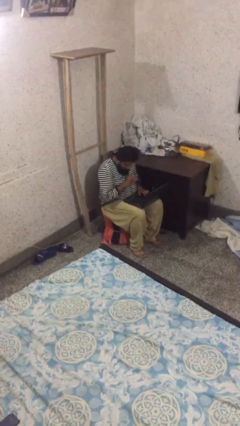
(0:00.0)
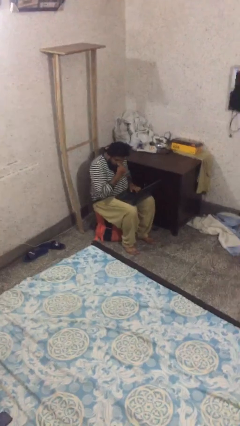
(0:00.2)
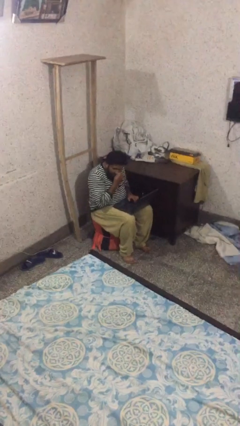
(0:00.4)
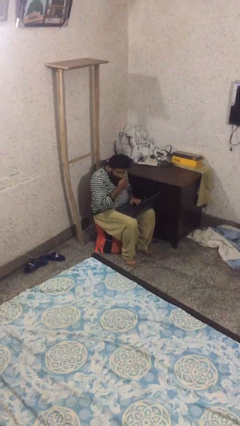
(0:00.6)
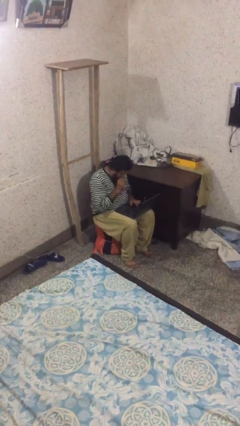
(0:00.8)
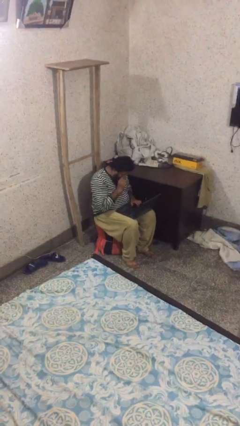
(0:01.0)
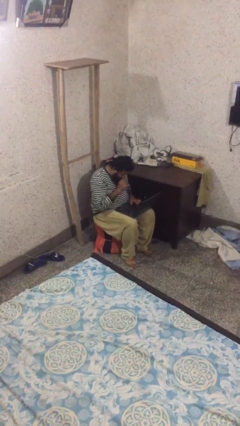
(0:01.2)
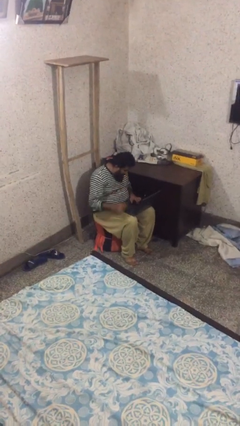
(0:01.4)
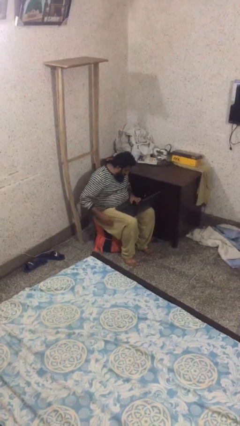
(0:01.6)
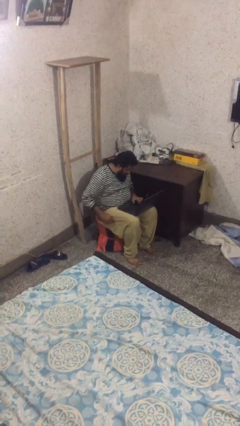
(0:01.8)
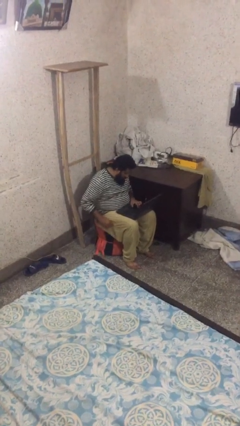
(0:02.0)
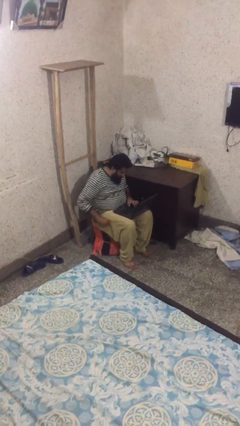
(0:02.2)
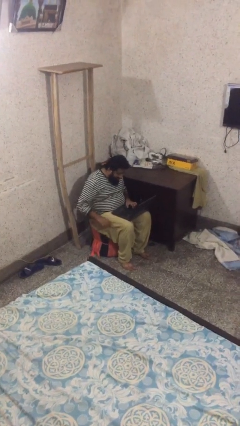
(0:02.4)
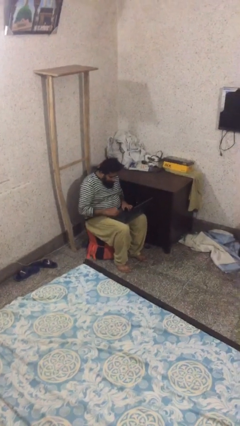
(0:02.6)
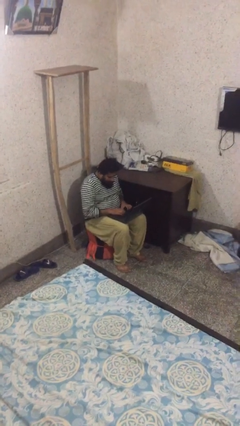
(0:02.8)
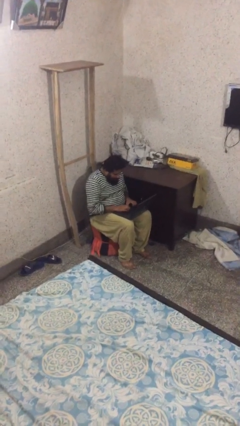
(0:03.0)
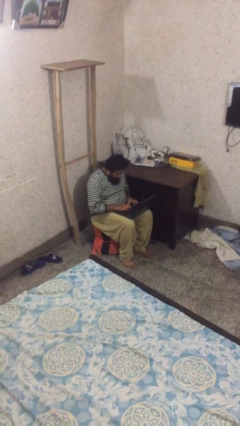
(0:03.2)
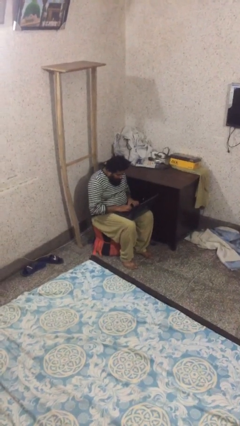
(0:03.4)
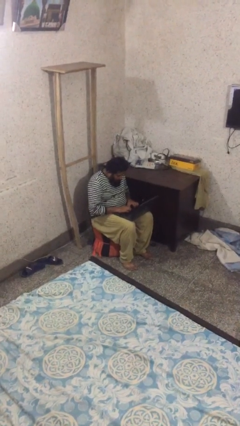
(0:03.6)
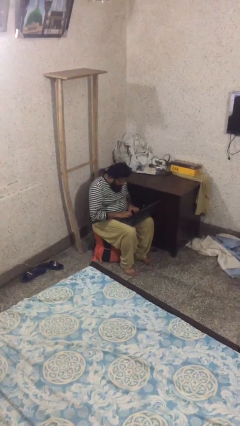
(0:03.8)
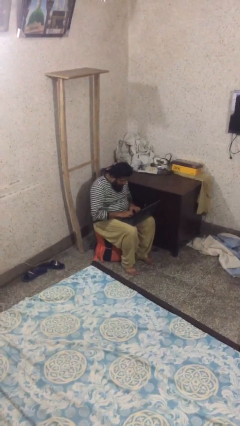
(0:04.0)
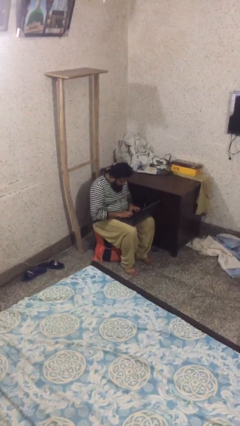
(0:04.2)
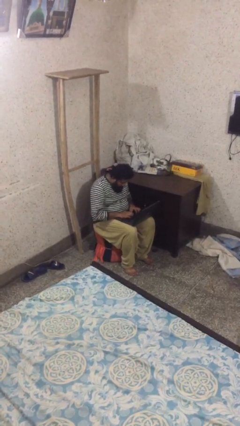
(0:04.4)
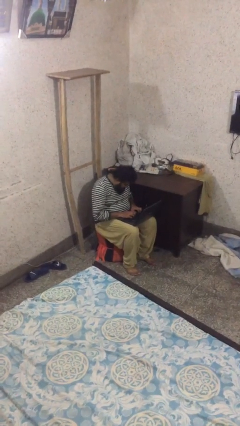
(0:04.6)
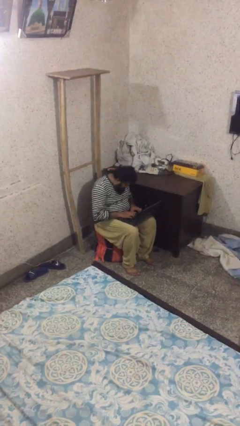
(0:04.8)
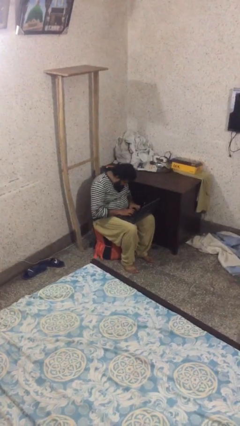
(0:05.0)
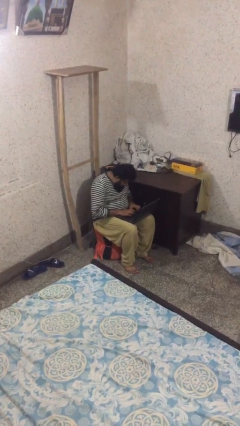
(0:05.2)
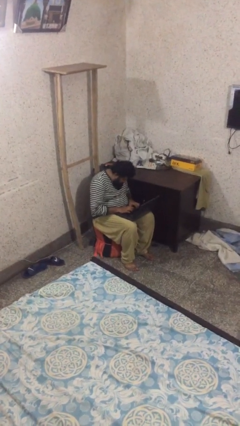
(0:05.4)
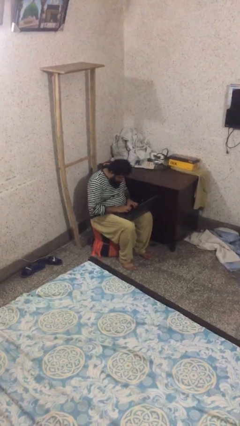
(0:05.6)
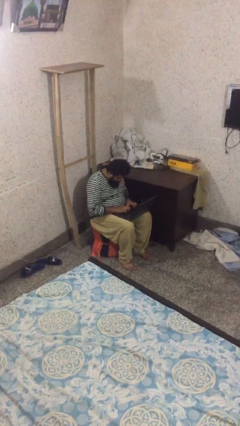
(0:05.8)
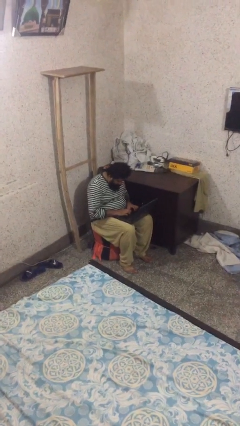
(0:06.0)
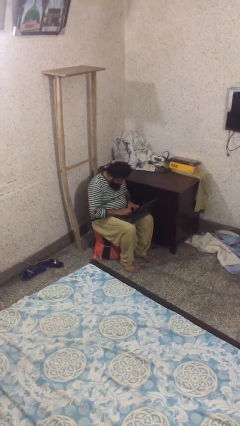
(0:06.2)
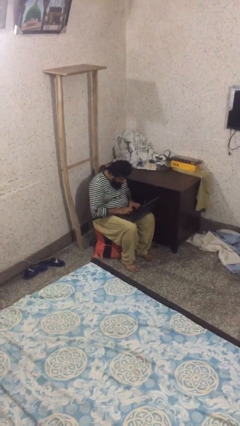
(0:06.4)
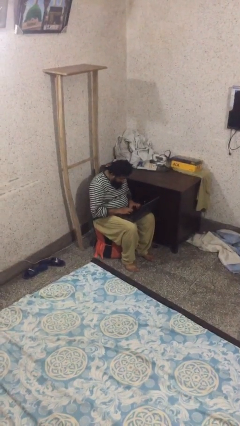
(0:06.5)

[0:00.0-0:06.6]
person interacts with laptop

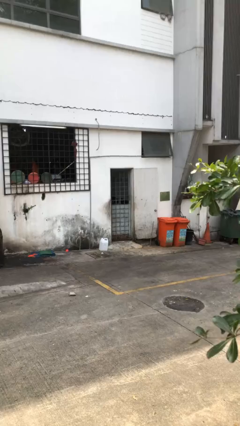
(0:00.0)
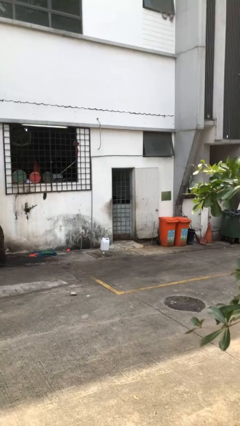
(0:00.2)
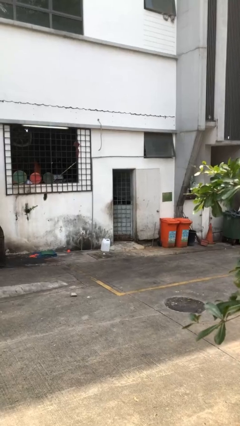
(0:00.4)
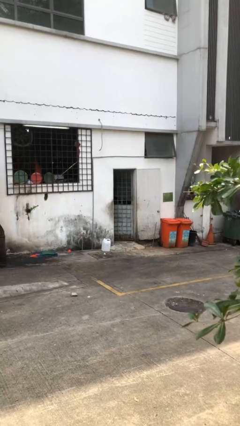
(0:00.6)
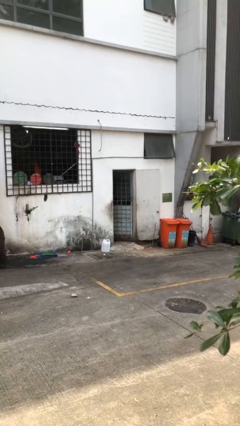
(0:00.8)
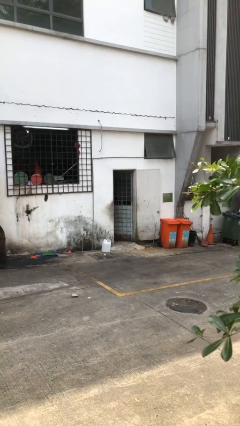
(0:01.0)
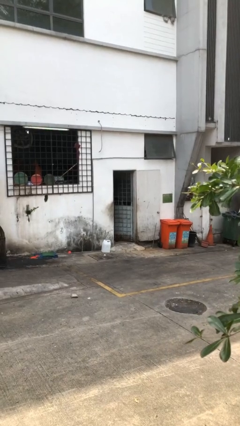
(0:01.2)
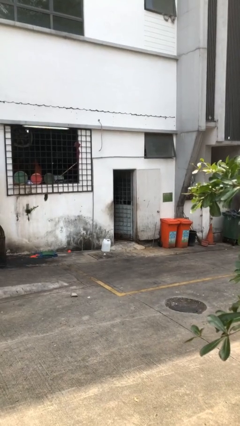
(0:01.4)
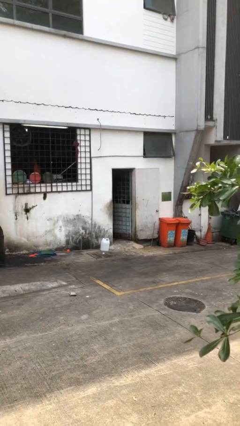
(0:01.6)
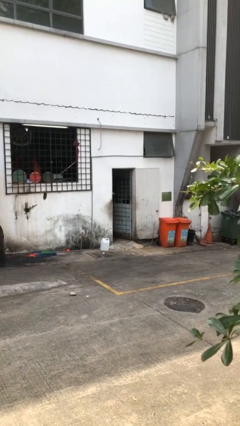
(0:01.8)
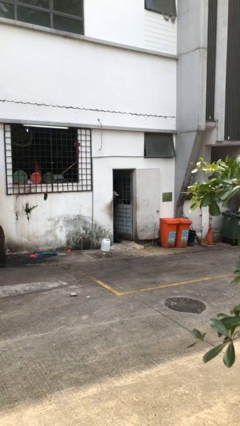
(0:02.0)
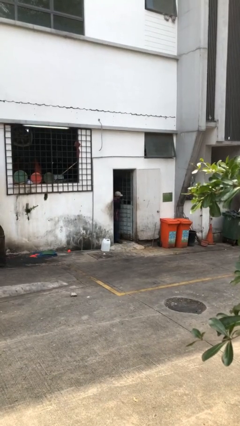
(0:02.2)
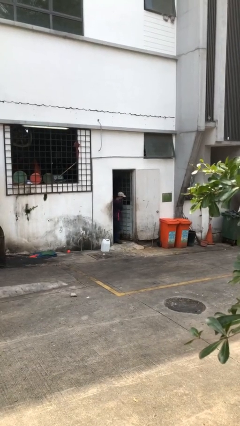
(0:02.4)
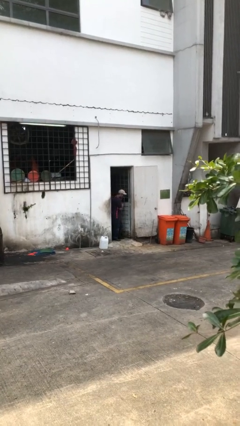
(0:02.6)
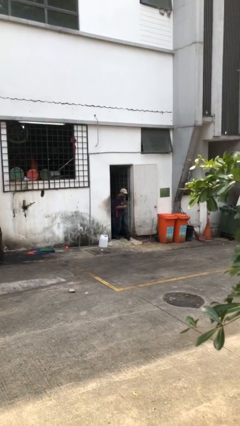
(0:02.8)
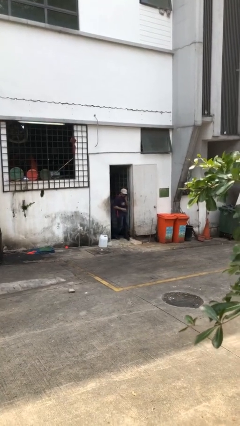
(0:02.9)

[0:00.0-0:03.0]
person opens facility door

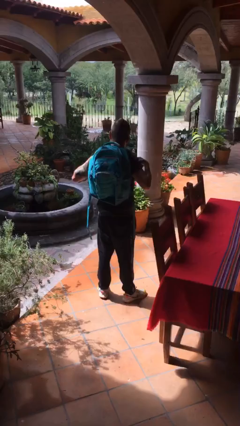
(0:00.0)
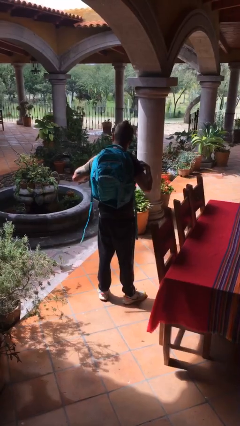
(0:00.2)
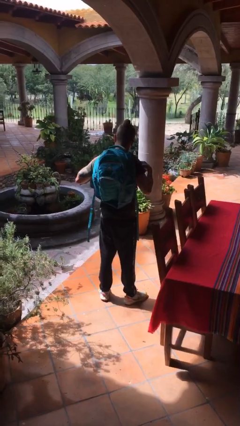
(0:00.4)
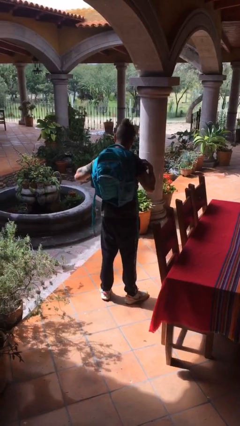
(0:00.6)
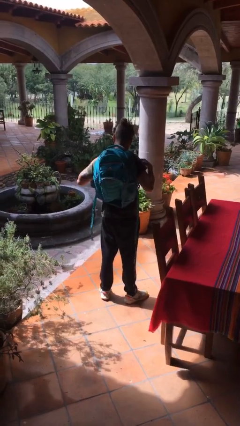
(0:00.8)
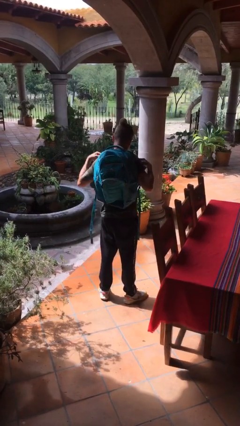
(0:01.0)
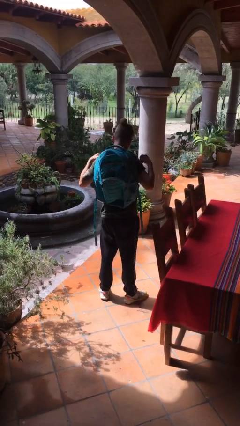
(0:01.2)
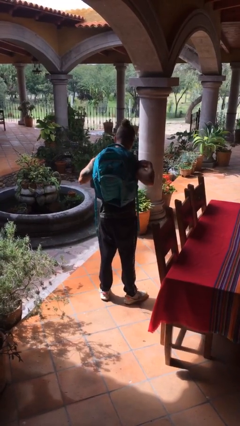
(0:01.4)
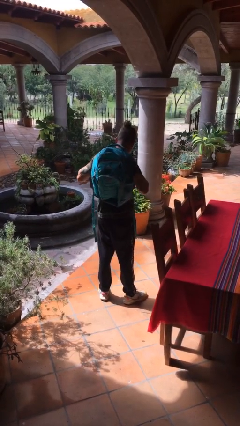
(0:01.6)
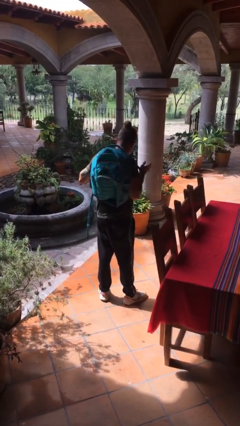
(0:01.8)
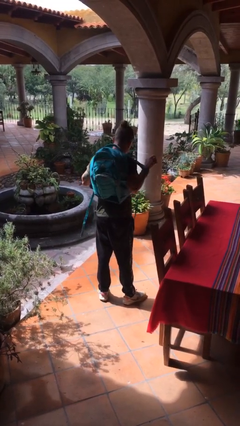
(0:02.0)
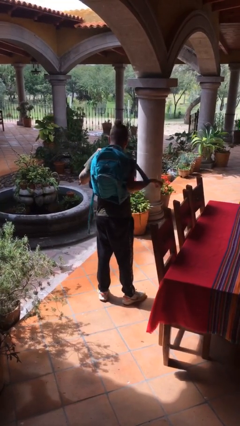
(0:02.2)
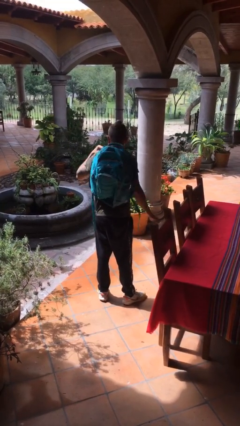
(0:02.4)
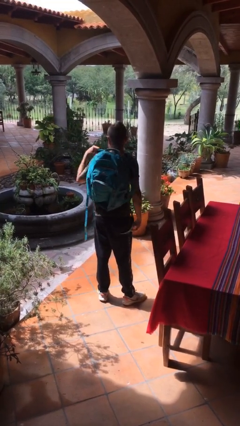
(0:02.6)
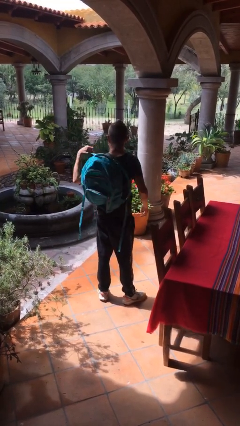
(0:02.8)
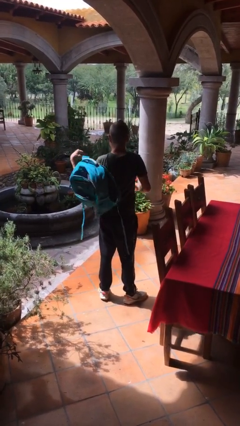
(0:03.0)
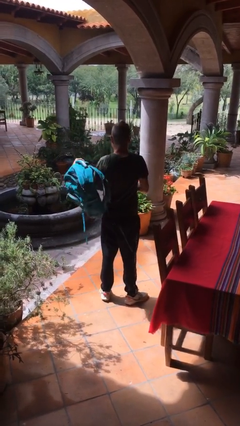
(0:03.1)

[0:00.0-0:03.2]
person takes off backpack

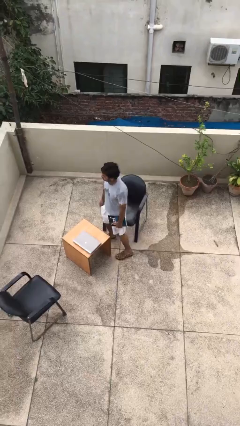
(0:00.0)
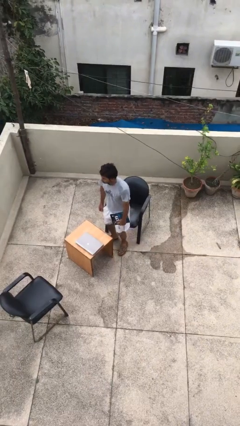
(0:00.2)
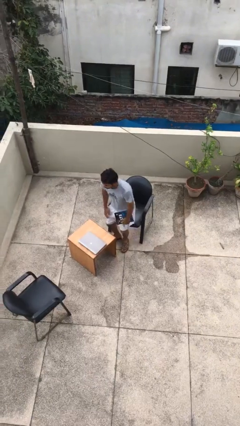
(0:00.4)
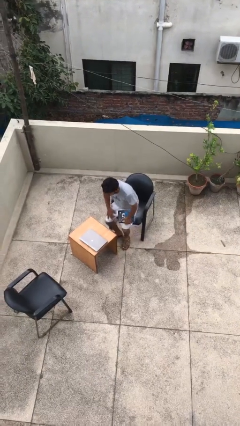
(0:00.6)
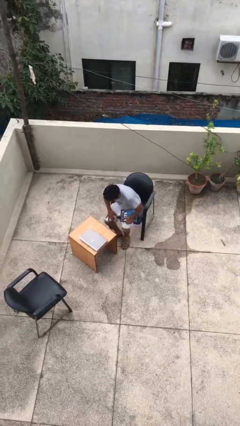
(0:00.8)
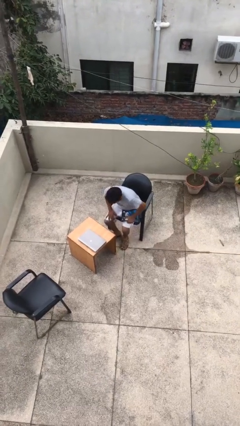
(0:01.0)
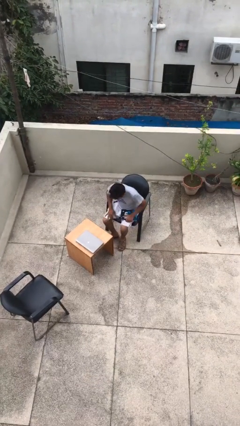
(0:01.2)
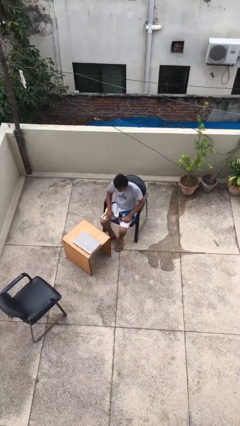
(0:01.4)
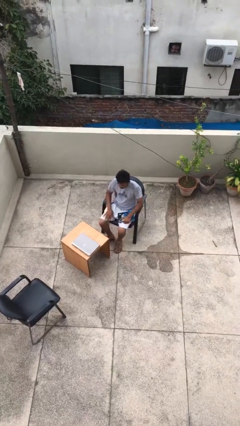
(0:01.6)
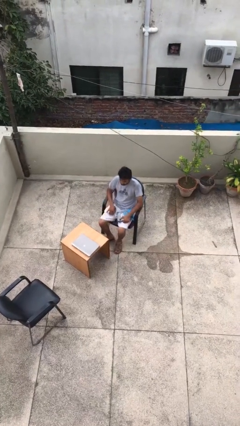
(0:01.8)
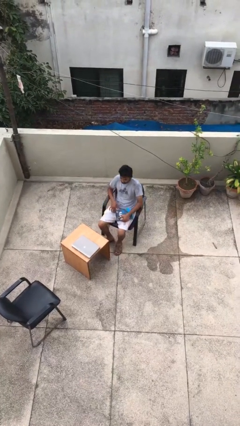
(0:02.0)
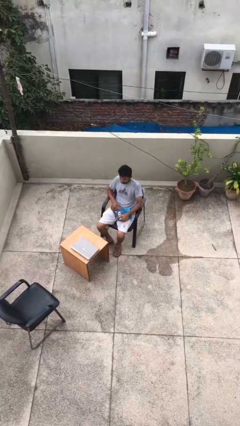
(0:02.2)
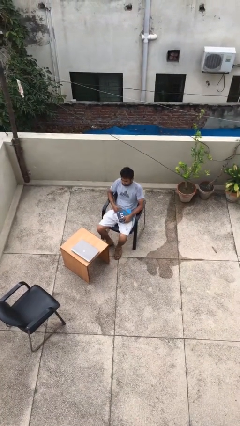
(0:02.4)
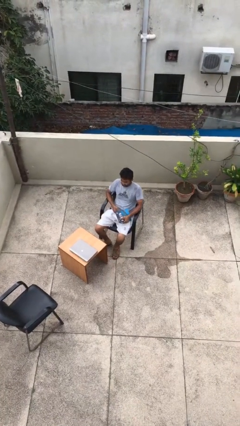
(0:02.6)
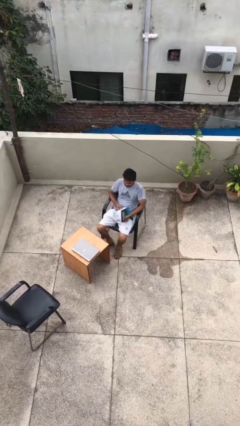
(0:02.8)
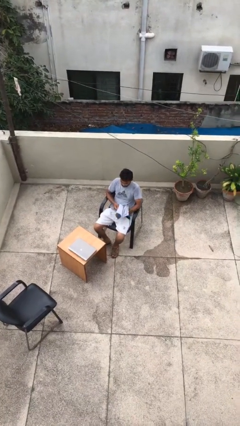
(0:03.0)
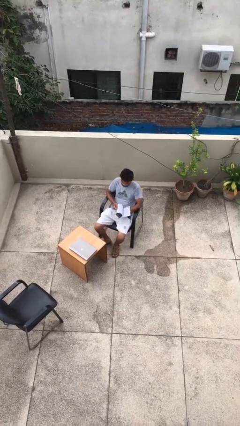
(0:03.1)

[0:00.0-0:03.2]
person sits down

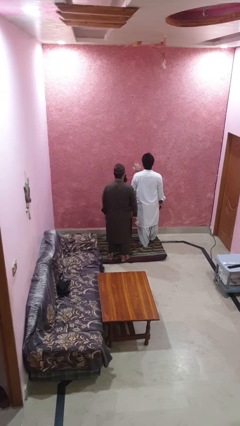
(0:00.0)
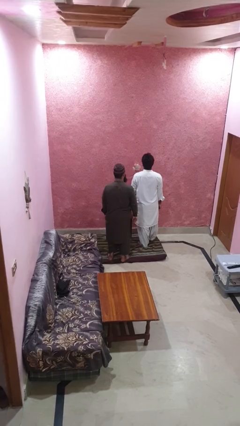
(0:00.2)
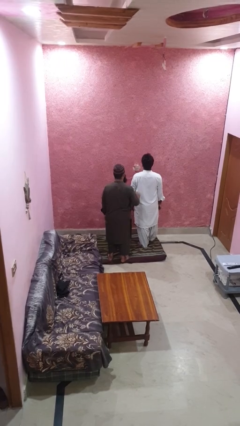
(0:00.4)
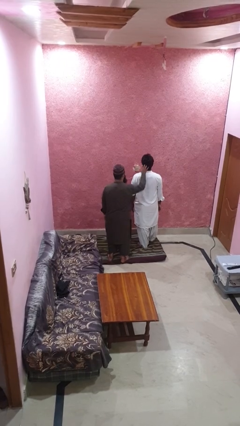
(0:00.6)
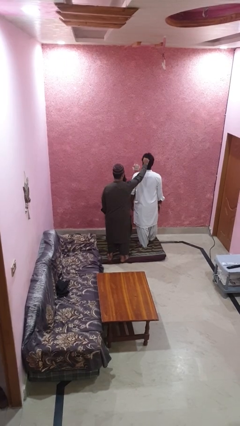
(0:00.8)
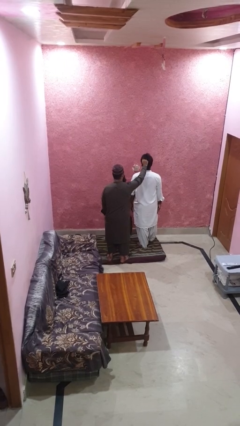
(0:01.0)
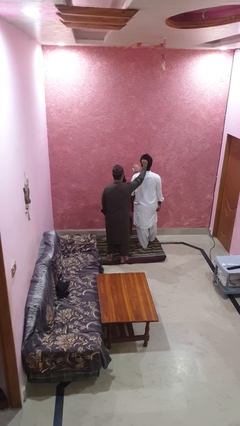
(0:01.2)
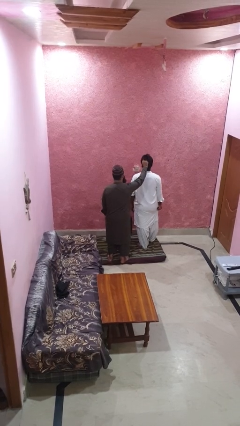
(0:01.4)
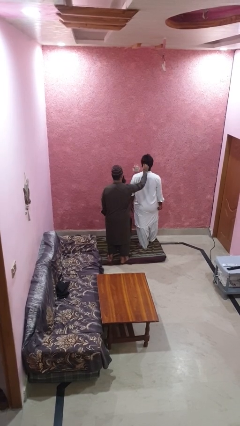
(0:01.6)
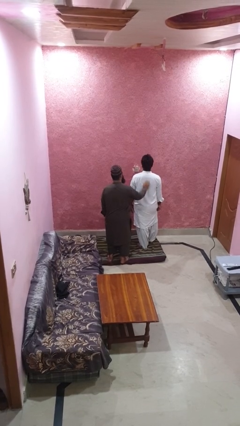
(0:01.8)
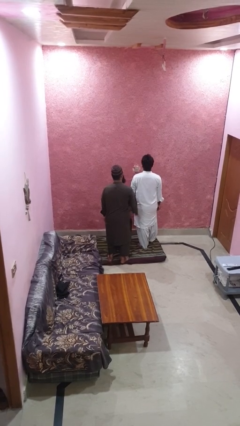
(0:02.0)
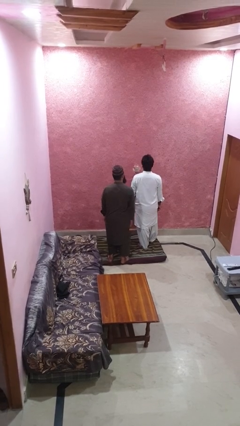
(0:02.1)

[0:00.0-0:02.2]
person grabs person by hair
